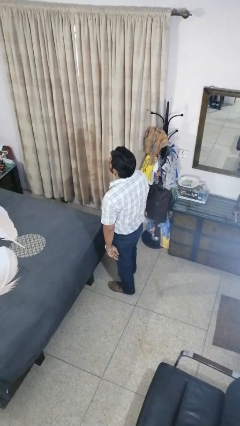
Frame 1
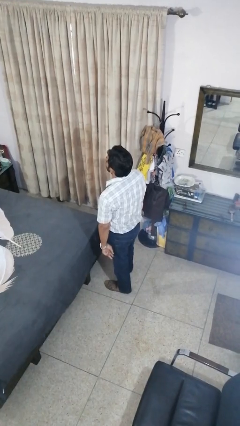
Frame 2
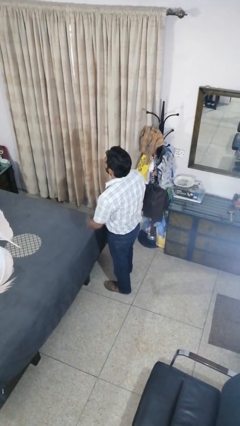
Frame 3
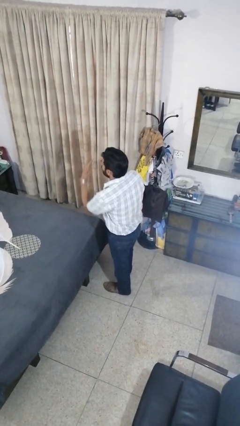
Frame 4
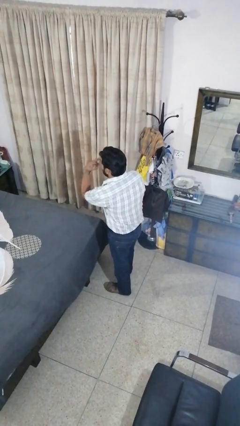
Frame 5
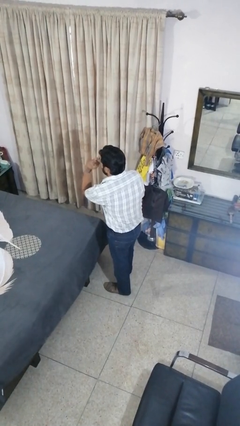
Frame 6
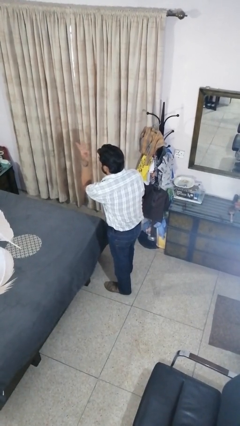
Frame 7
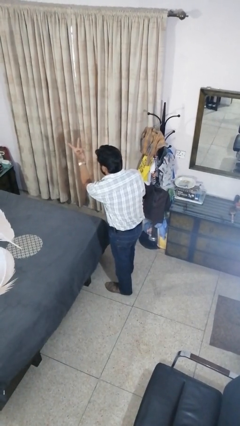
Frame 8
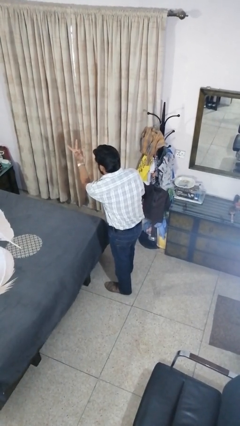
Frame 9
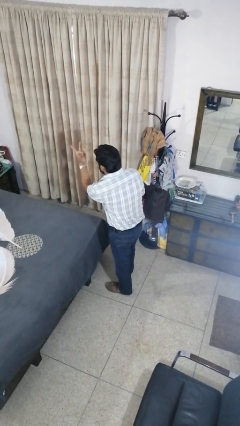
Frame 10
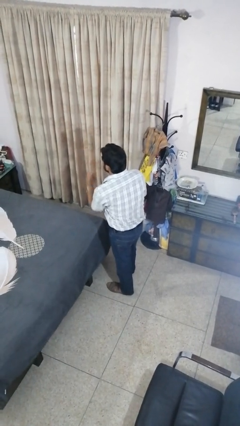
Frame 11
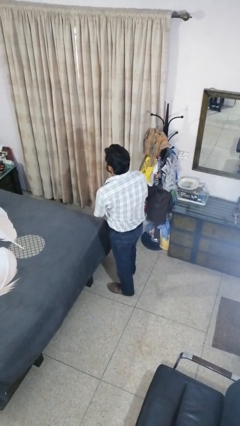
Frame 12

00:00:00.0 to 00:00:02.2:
person gestures watch closely

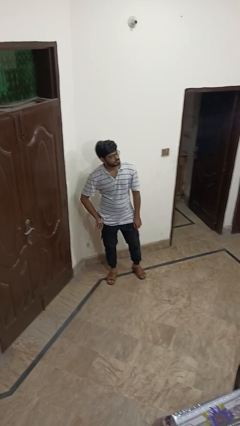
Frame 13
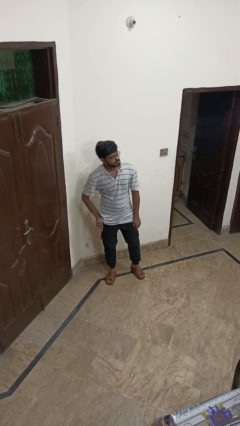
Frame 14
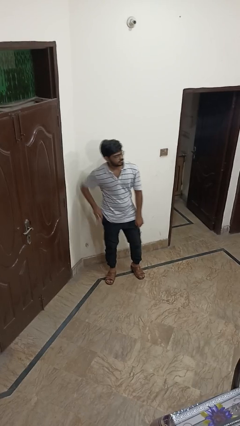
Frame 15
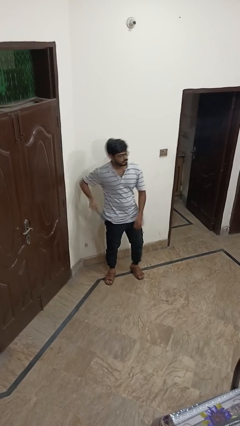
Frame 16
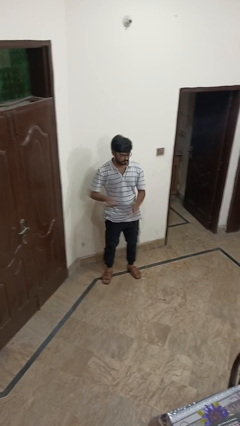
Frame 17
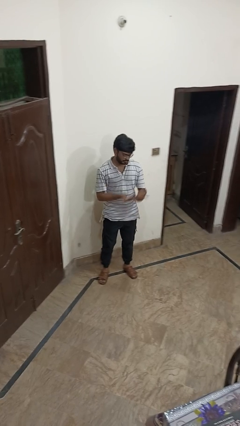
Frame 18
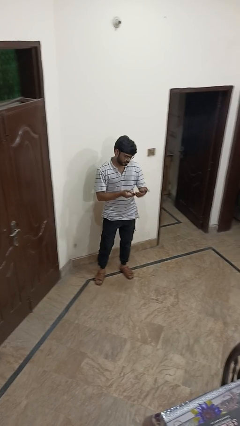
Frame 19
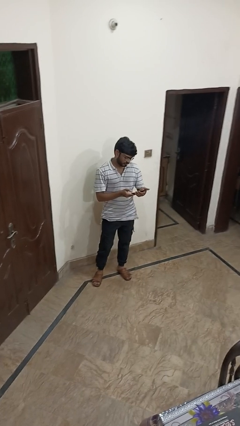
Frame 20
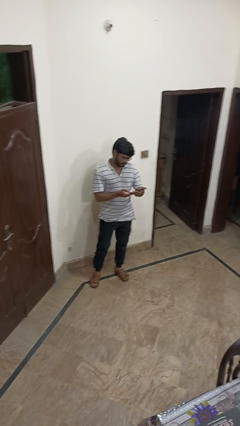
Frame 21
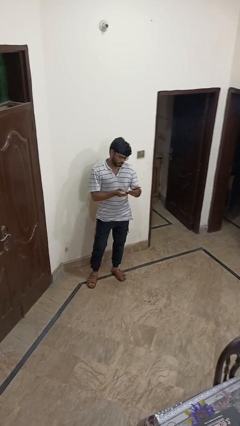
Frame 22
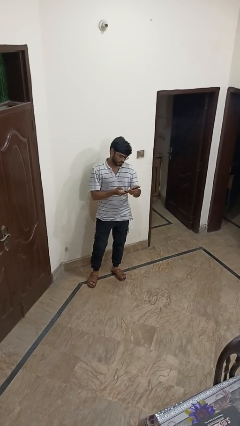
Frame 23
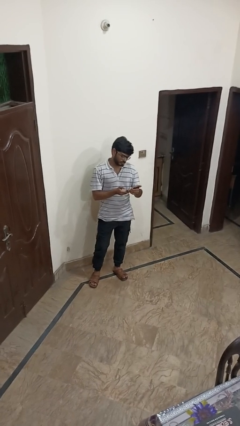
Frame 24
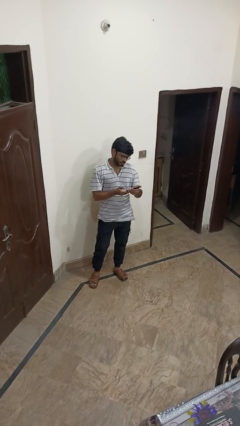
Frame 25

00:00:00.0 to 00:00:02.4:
person takes phone from pocket

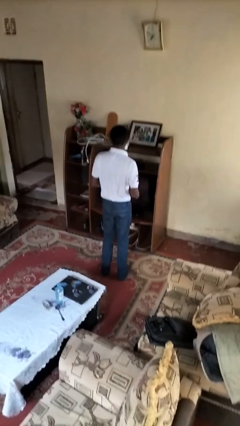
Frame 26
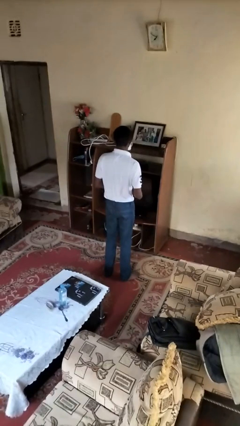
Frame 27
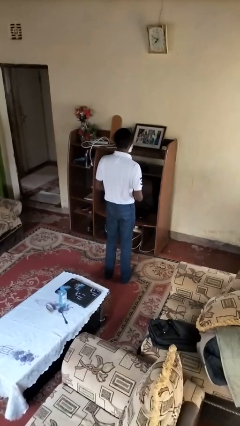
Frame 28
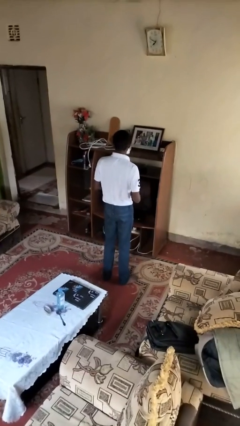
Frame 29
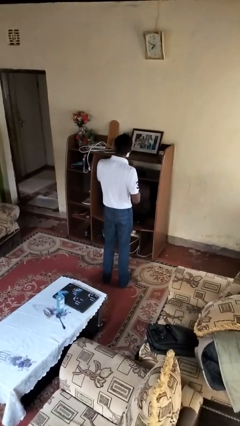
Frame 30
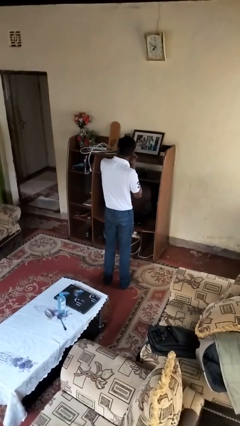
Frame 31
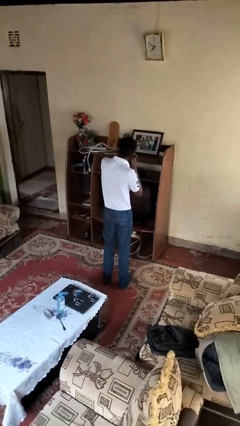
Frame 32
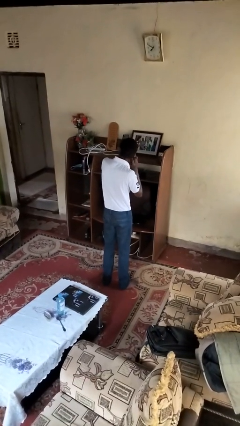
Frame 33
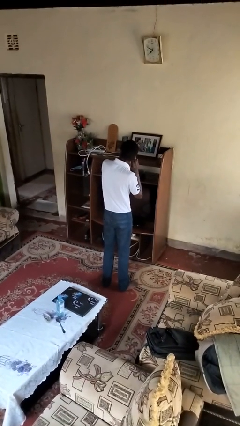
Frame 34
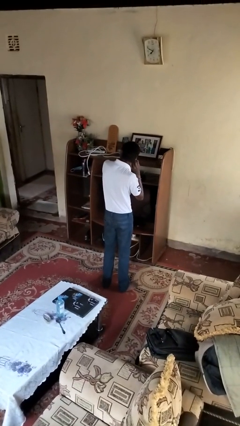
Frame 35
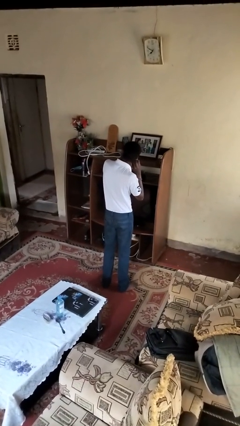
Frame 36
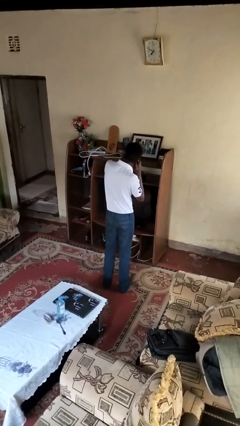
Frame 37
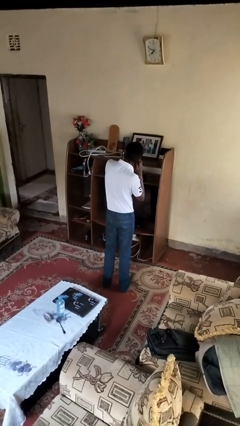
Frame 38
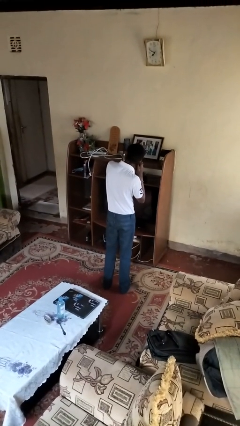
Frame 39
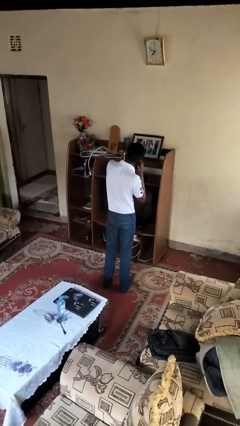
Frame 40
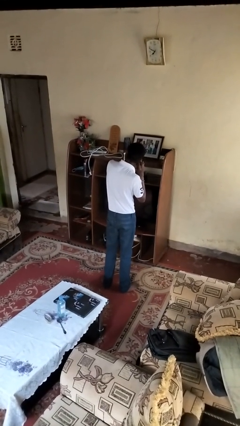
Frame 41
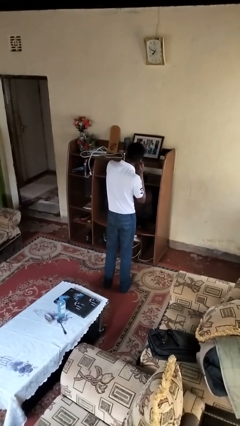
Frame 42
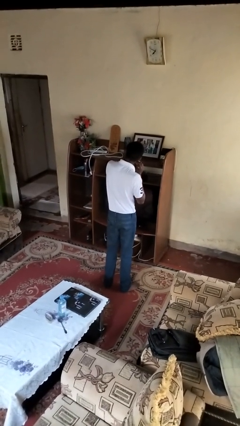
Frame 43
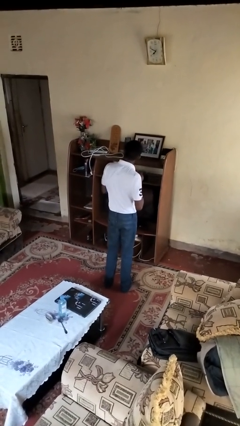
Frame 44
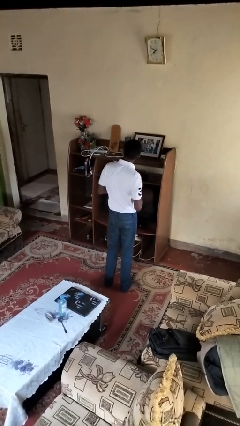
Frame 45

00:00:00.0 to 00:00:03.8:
person puts on earrings

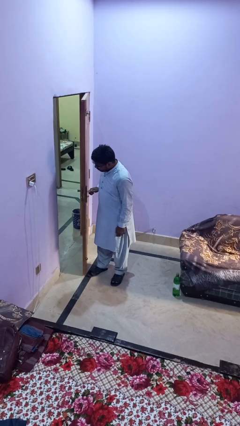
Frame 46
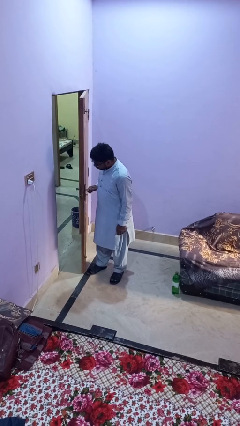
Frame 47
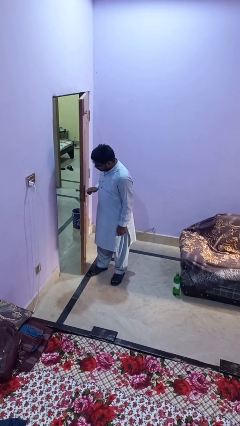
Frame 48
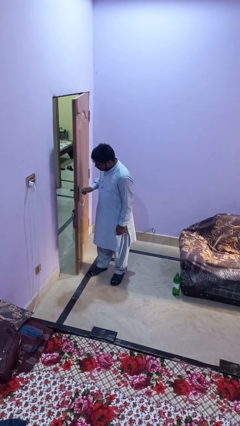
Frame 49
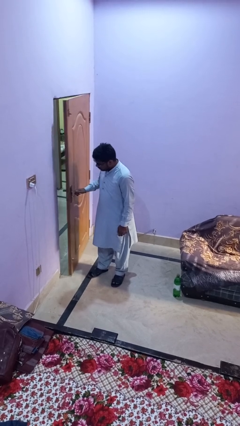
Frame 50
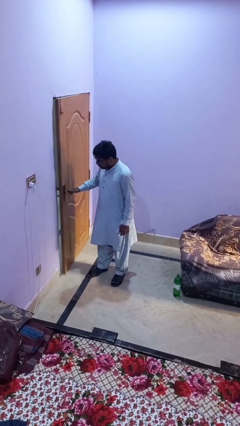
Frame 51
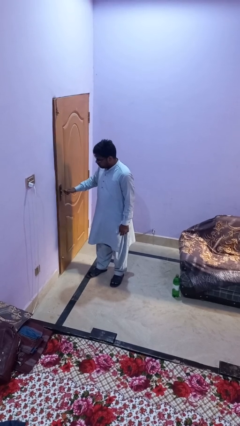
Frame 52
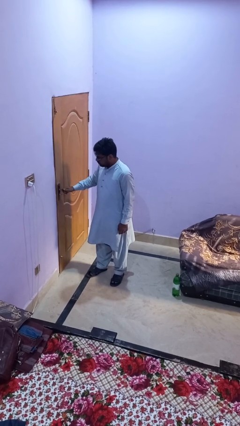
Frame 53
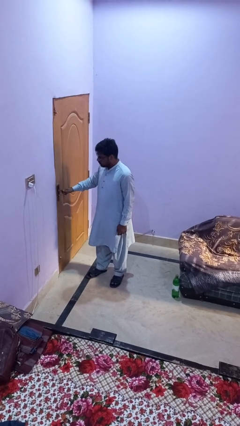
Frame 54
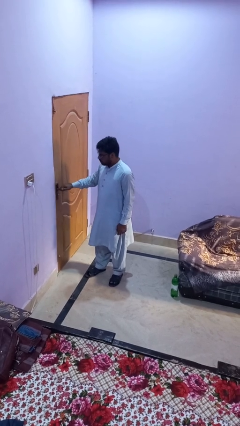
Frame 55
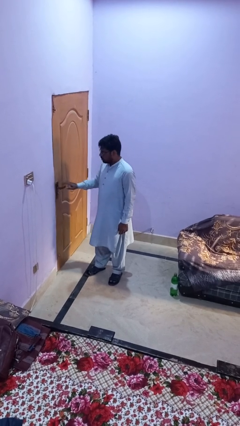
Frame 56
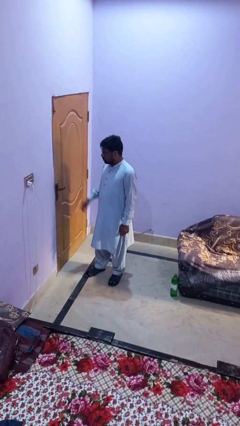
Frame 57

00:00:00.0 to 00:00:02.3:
person closes facility door

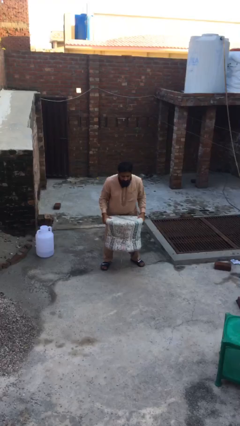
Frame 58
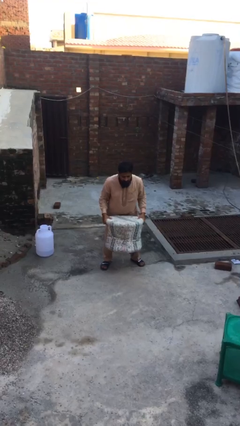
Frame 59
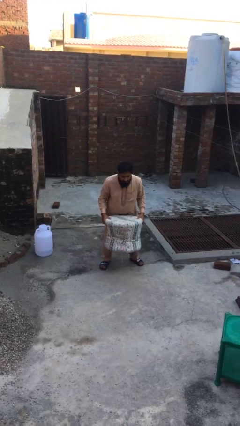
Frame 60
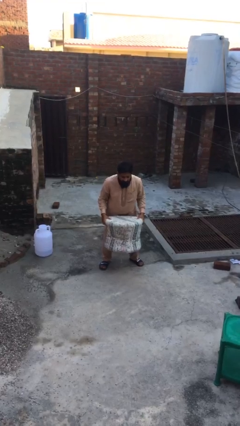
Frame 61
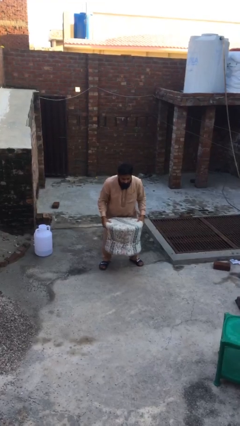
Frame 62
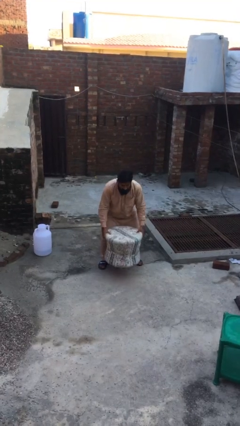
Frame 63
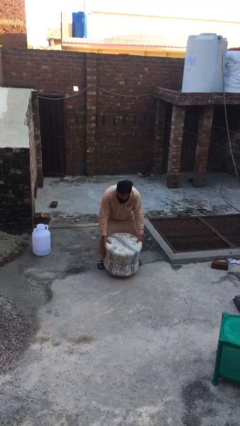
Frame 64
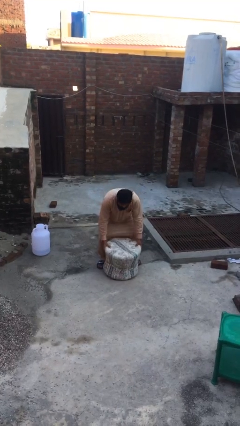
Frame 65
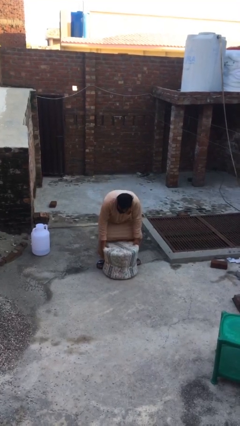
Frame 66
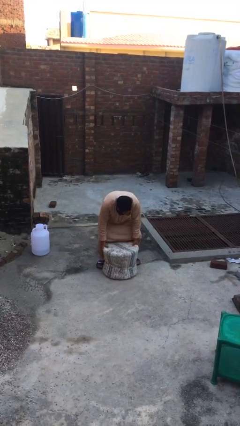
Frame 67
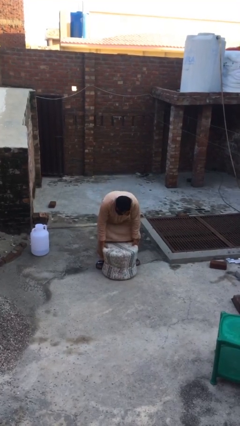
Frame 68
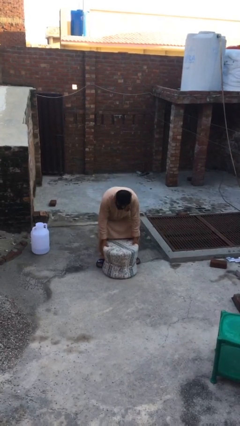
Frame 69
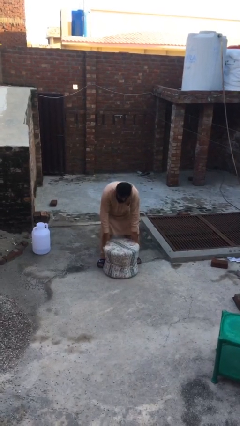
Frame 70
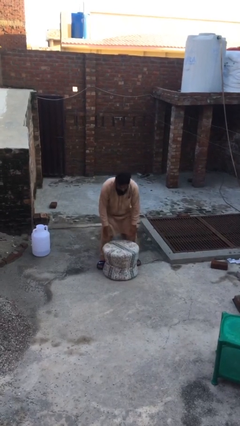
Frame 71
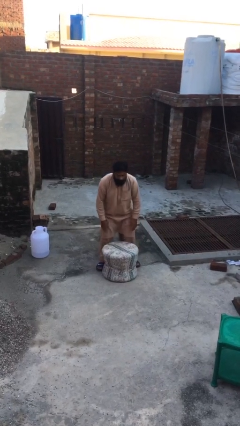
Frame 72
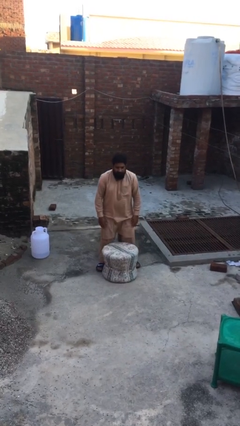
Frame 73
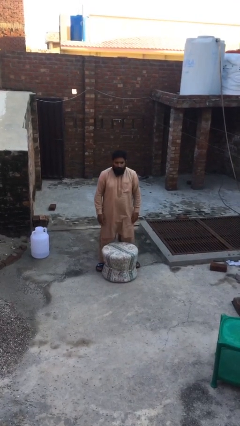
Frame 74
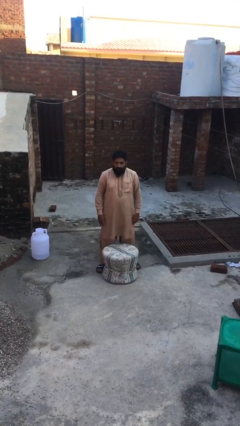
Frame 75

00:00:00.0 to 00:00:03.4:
person puts down object on floor

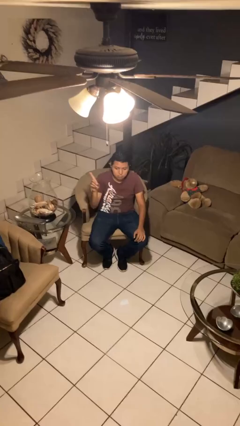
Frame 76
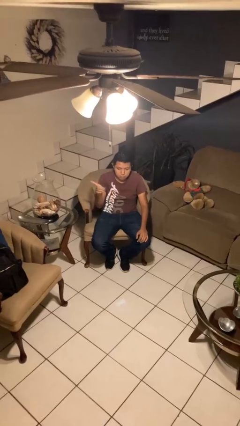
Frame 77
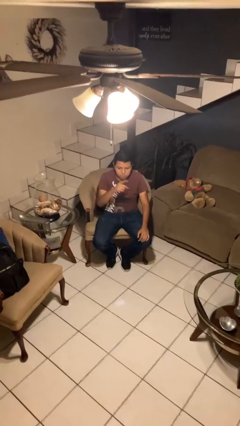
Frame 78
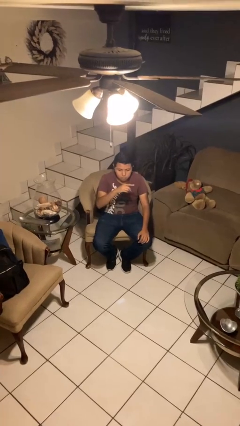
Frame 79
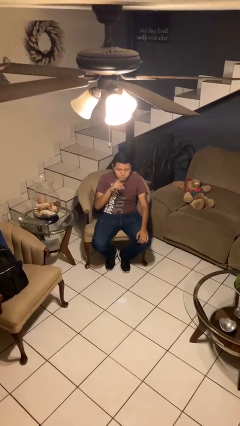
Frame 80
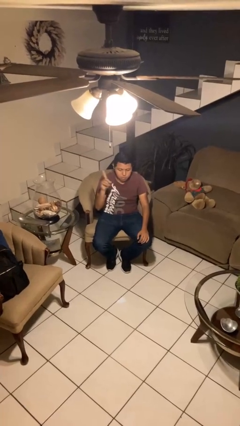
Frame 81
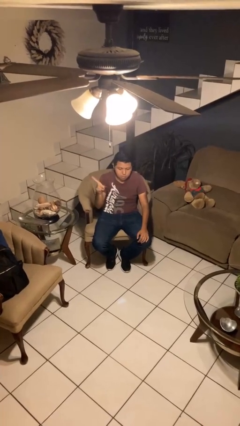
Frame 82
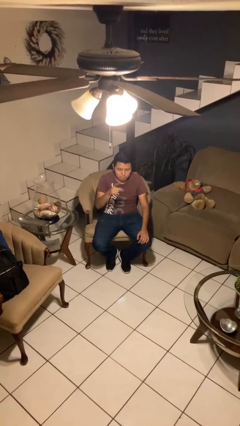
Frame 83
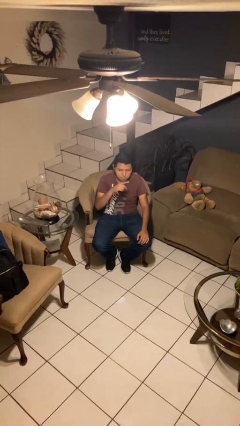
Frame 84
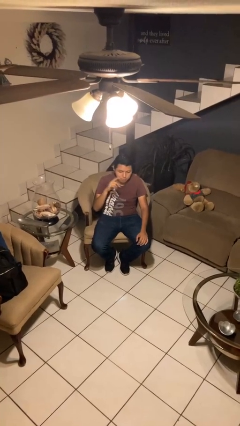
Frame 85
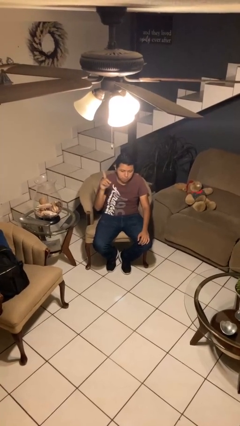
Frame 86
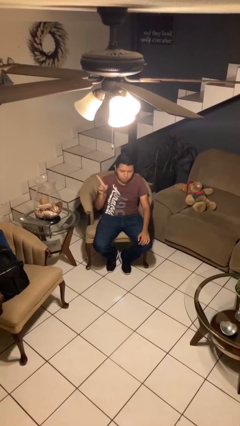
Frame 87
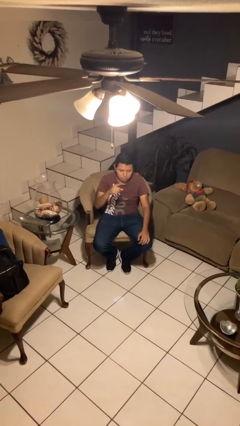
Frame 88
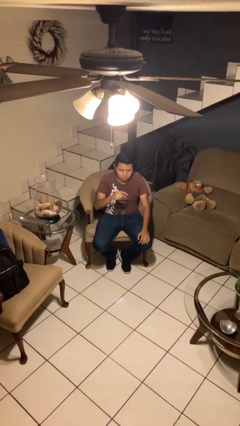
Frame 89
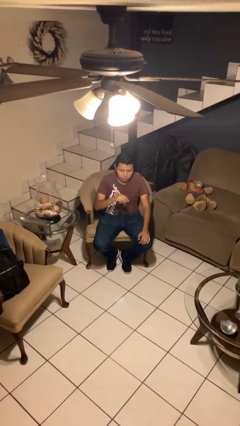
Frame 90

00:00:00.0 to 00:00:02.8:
person gestures swipe left

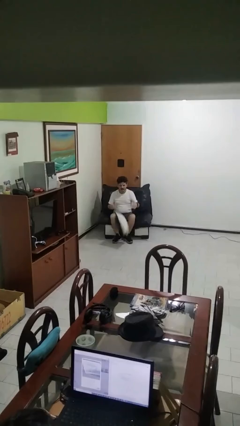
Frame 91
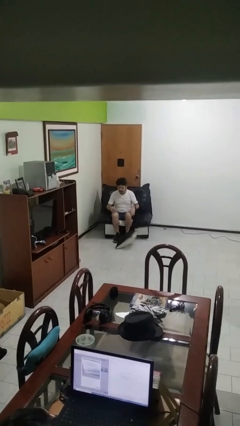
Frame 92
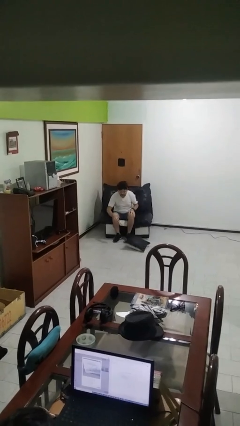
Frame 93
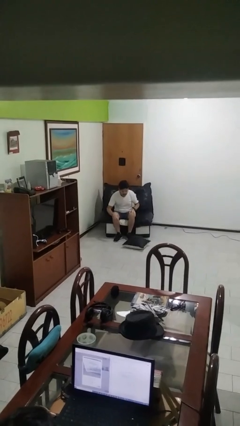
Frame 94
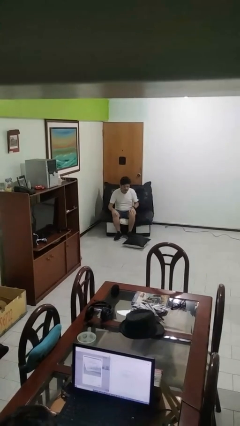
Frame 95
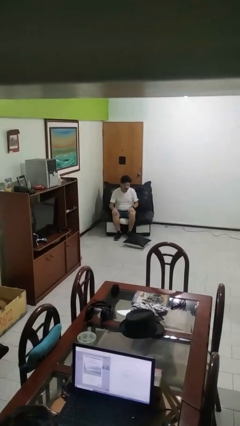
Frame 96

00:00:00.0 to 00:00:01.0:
person drops object
